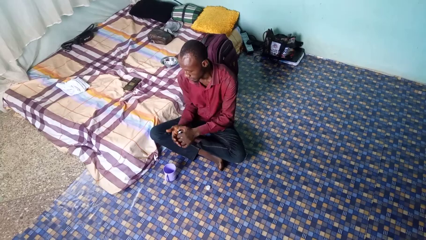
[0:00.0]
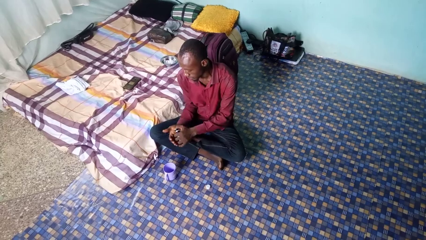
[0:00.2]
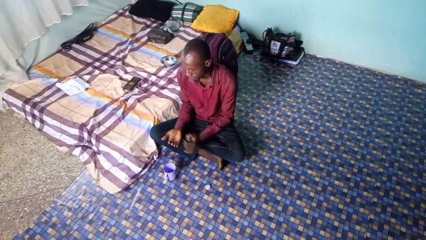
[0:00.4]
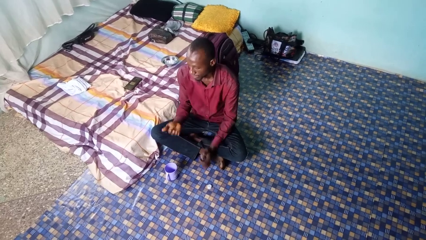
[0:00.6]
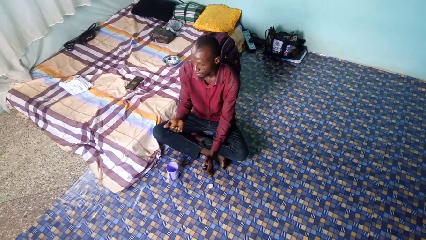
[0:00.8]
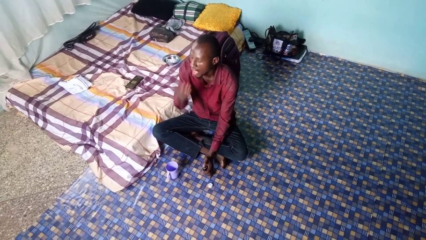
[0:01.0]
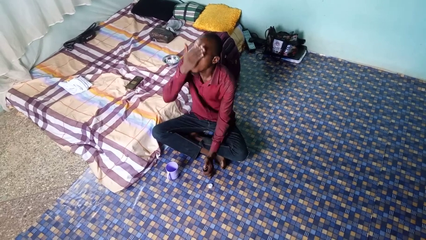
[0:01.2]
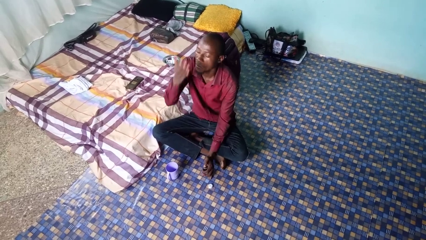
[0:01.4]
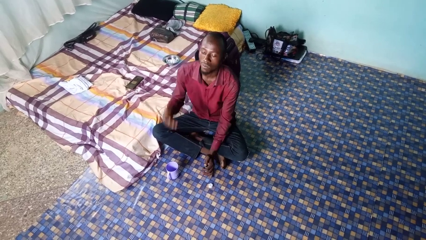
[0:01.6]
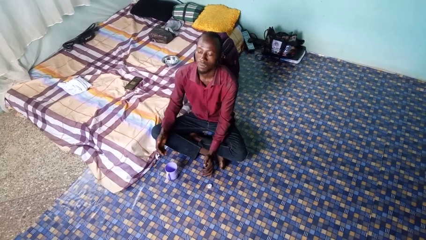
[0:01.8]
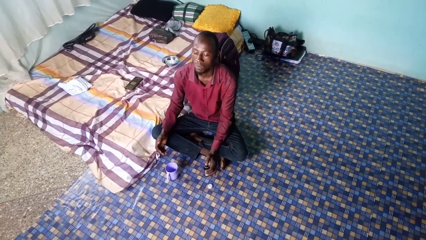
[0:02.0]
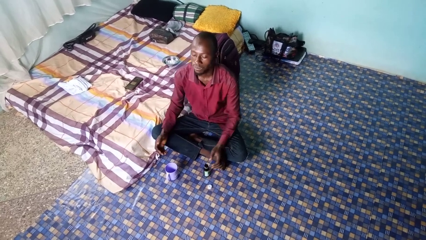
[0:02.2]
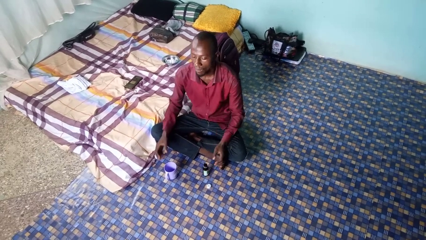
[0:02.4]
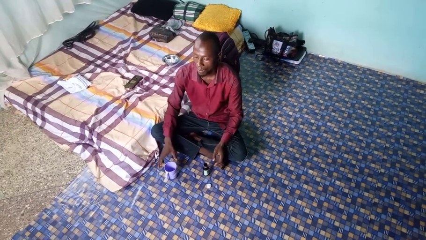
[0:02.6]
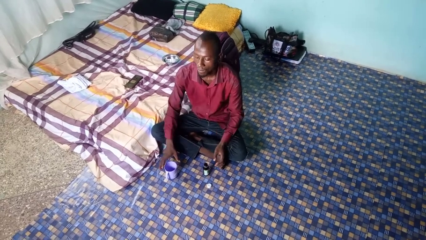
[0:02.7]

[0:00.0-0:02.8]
person takes medicine pills

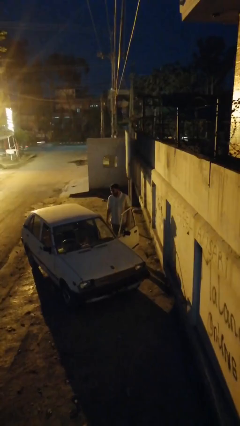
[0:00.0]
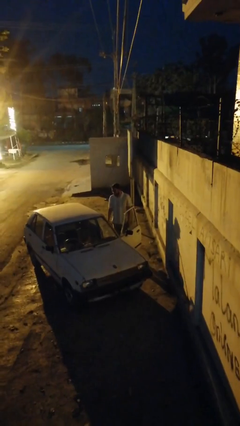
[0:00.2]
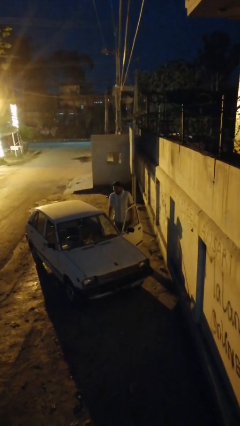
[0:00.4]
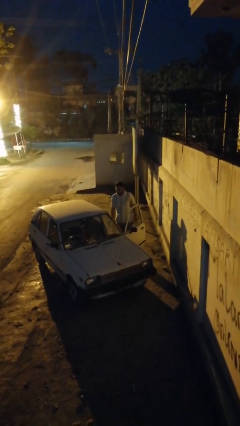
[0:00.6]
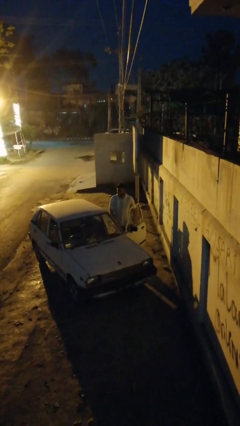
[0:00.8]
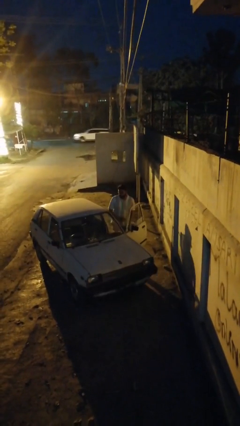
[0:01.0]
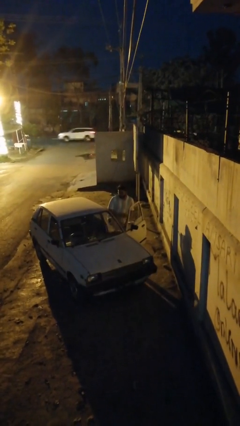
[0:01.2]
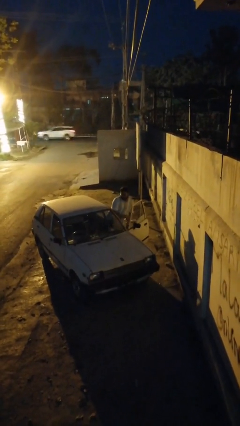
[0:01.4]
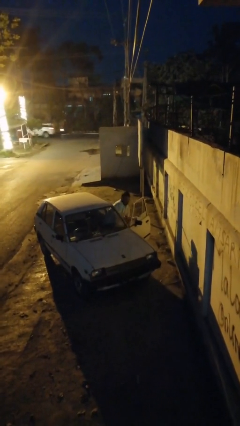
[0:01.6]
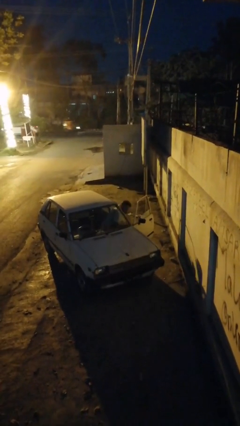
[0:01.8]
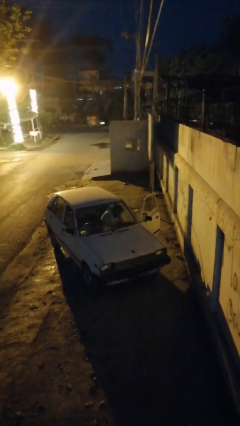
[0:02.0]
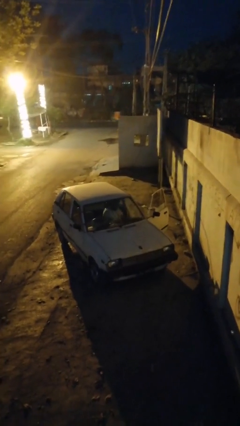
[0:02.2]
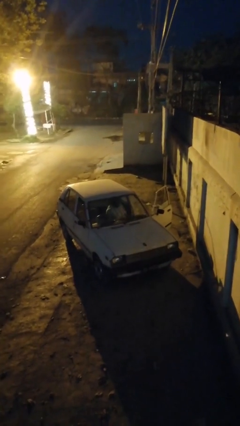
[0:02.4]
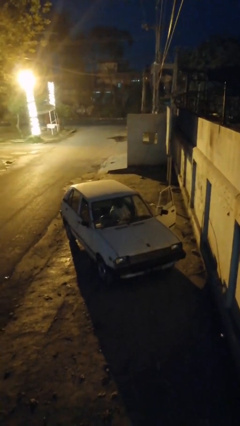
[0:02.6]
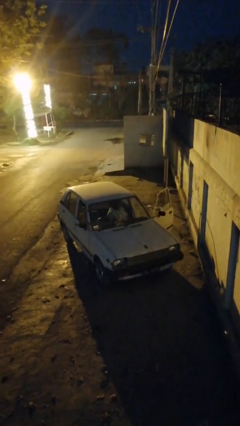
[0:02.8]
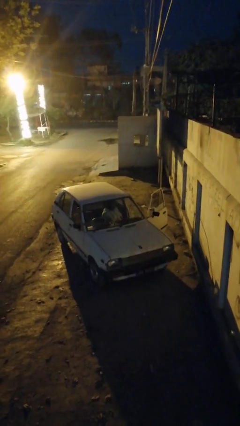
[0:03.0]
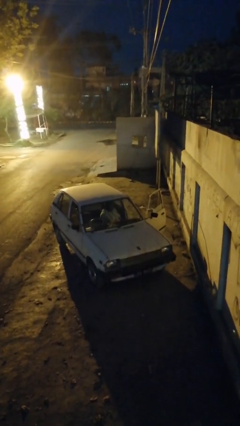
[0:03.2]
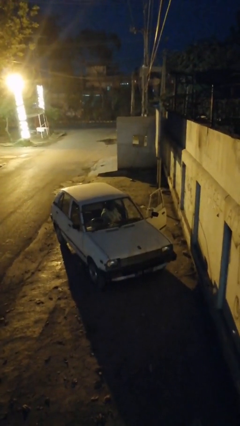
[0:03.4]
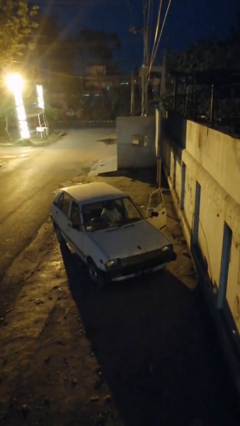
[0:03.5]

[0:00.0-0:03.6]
person enters car

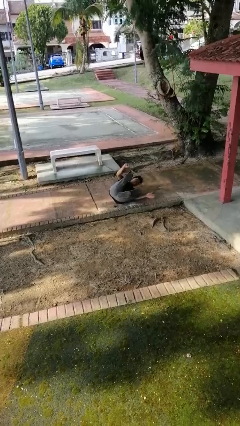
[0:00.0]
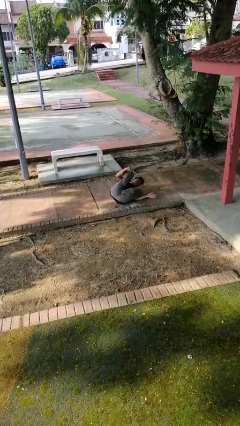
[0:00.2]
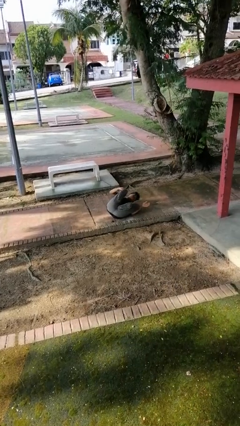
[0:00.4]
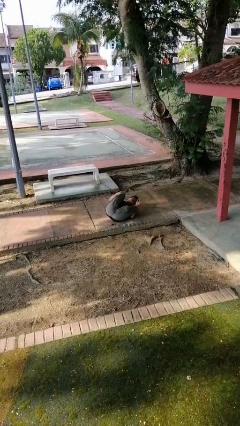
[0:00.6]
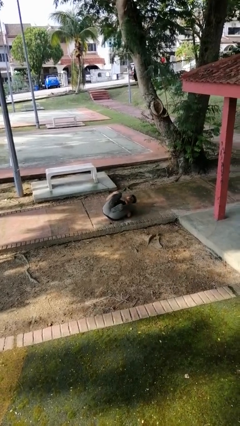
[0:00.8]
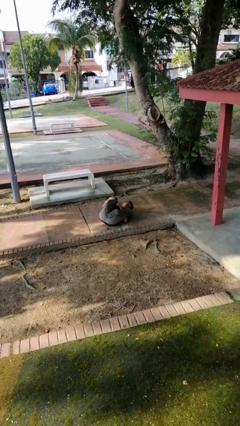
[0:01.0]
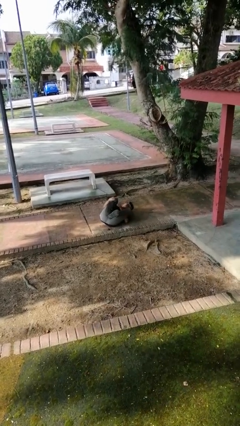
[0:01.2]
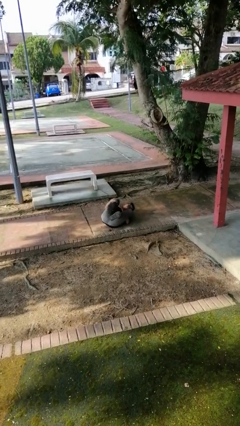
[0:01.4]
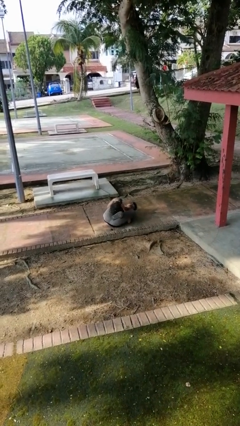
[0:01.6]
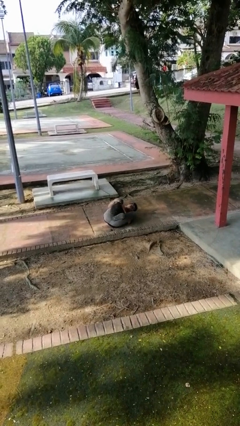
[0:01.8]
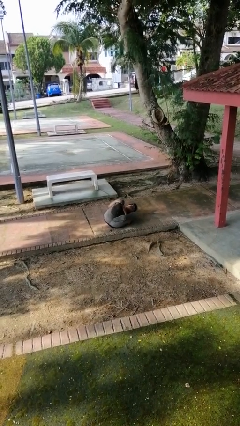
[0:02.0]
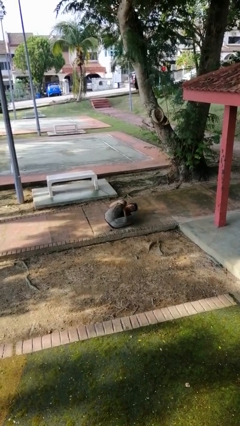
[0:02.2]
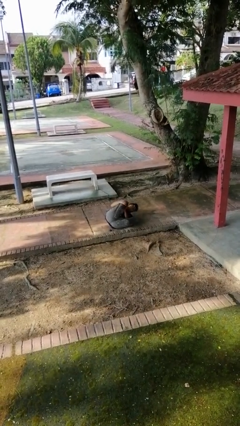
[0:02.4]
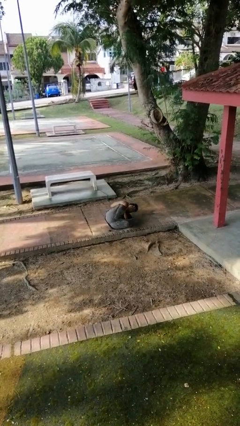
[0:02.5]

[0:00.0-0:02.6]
person lies down on floor

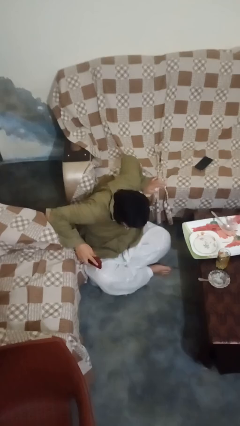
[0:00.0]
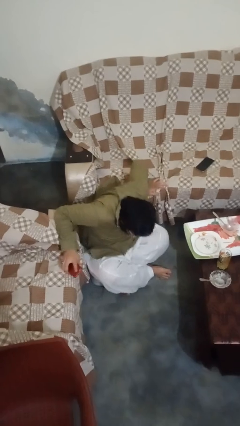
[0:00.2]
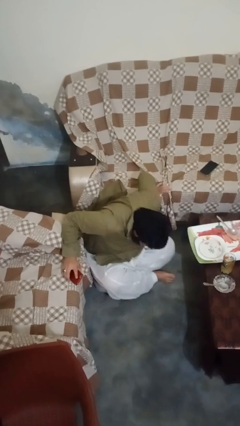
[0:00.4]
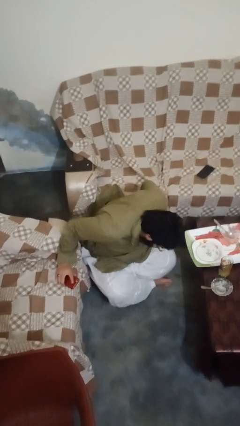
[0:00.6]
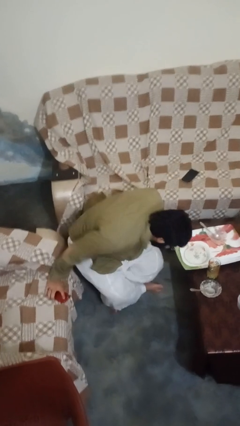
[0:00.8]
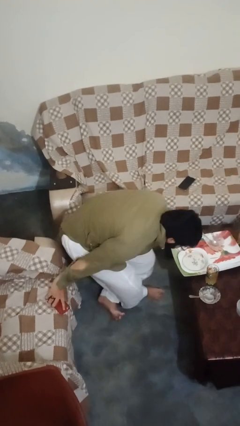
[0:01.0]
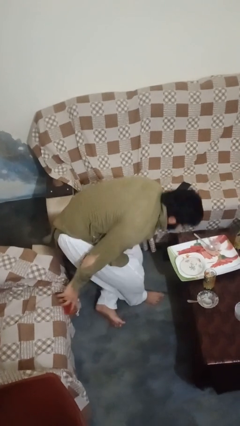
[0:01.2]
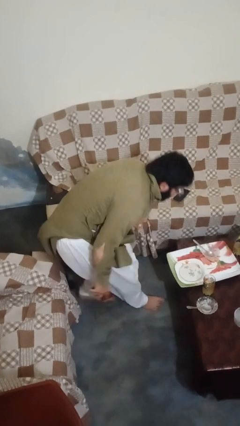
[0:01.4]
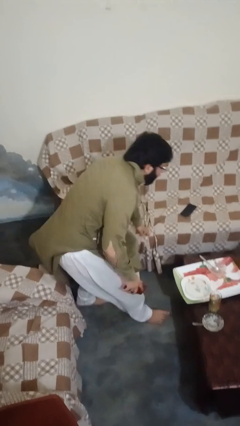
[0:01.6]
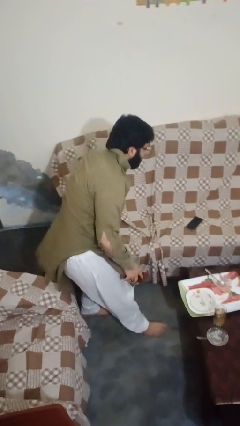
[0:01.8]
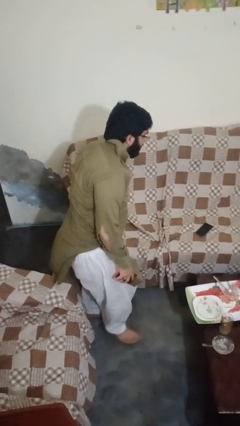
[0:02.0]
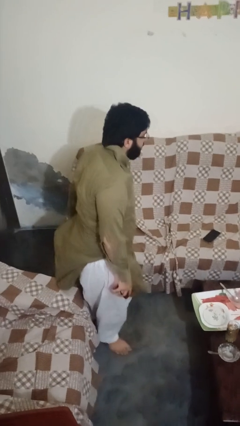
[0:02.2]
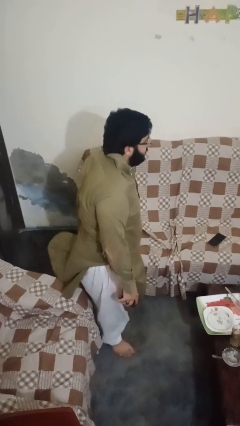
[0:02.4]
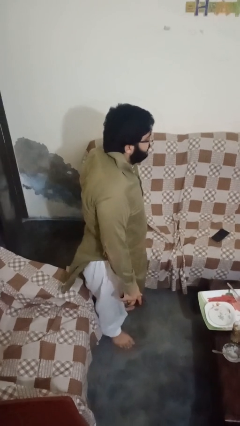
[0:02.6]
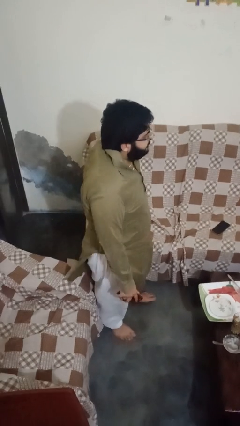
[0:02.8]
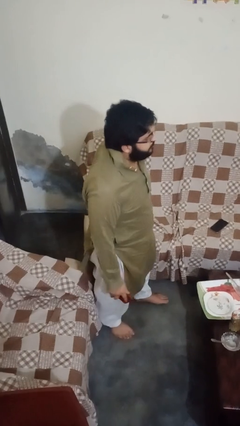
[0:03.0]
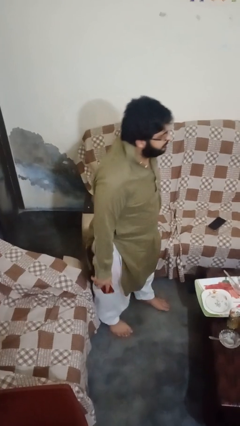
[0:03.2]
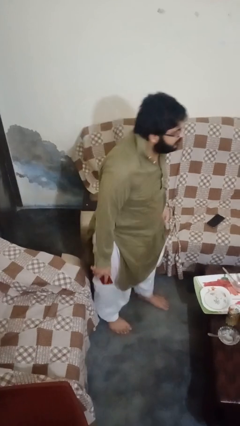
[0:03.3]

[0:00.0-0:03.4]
person stands up from floor

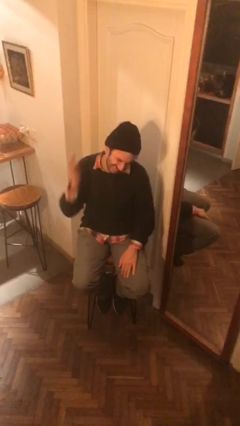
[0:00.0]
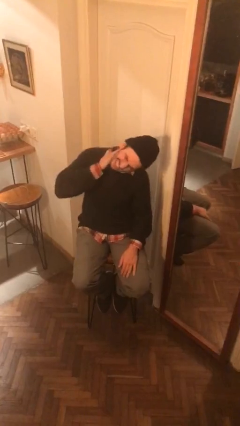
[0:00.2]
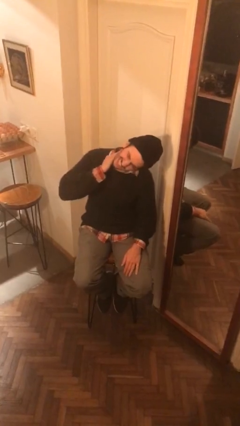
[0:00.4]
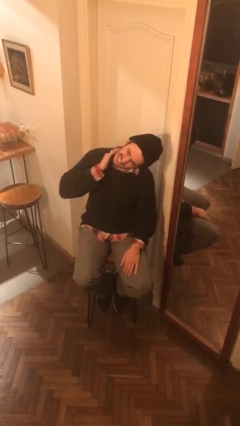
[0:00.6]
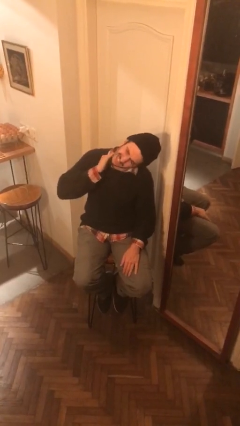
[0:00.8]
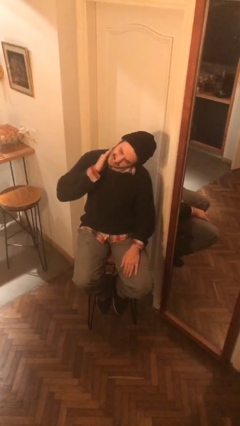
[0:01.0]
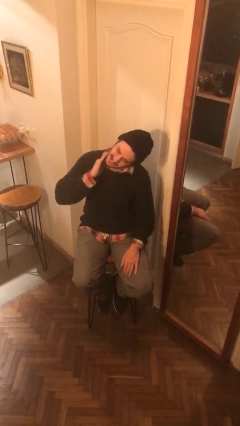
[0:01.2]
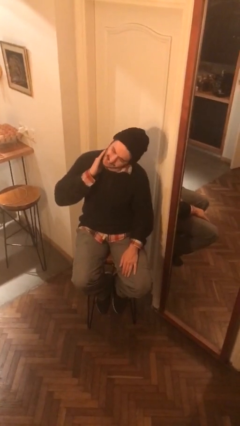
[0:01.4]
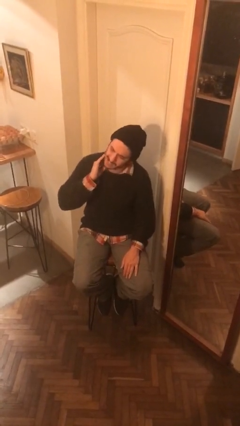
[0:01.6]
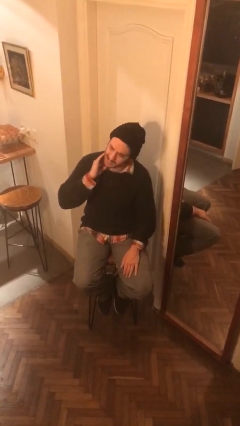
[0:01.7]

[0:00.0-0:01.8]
person swats bug

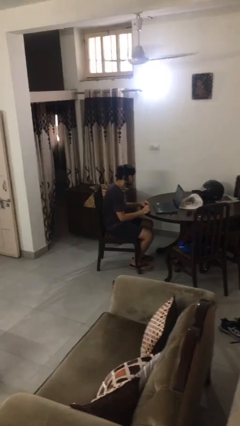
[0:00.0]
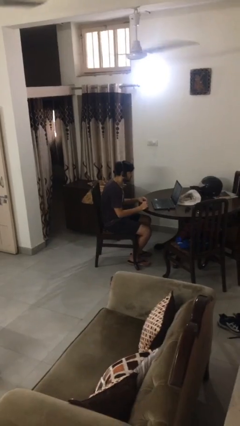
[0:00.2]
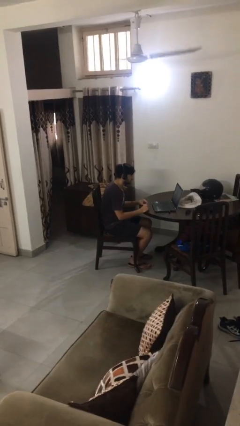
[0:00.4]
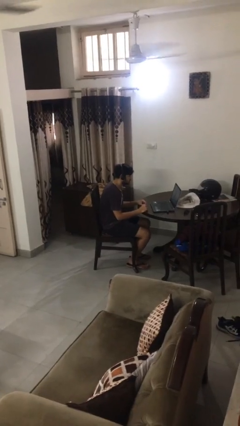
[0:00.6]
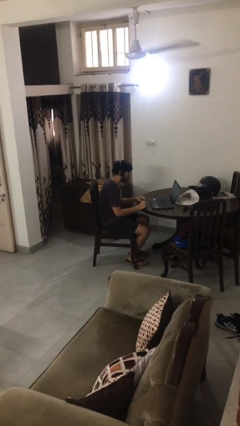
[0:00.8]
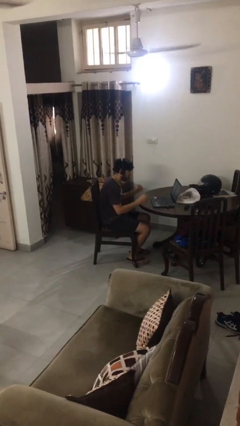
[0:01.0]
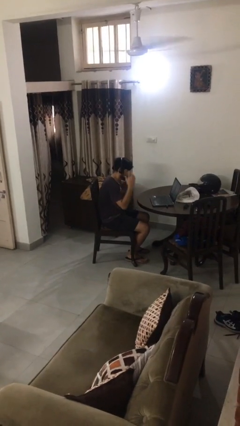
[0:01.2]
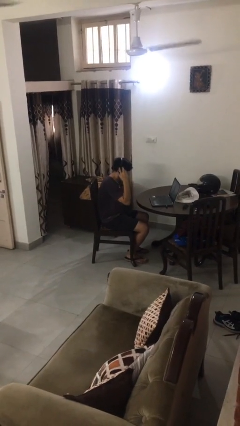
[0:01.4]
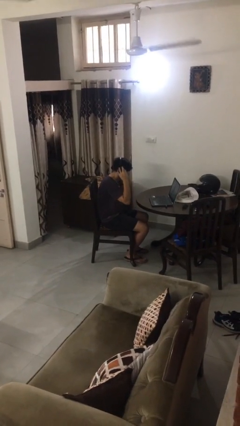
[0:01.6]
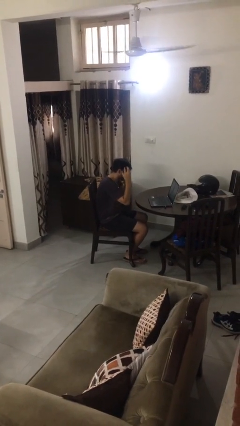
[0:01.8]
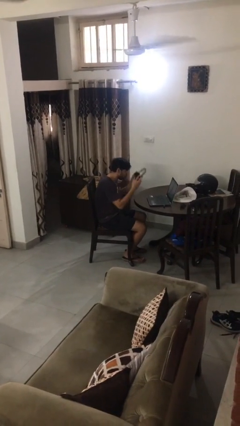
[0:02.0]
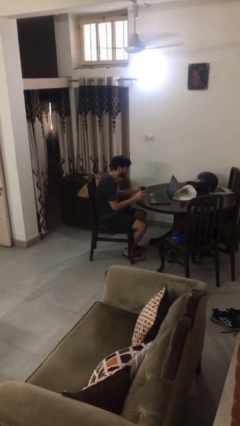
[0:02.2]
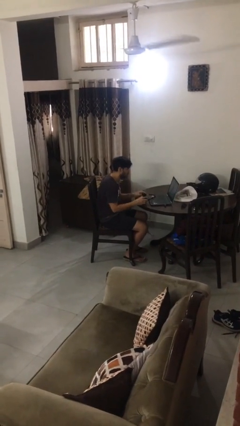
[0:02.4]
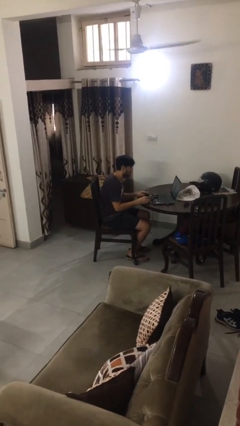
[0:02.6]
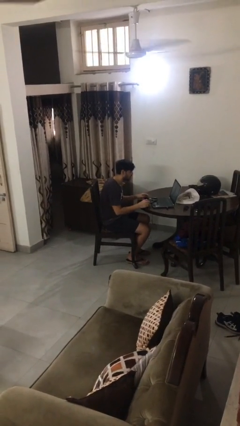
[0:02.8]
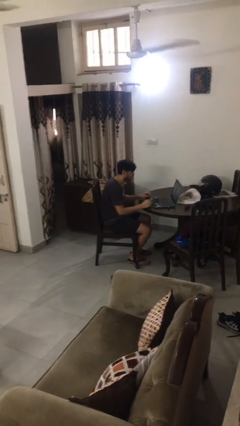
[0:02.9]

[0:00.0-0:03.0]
person takes off headphones
